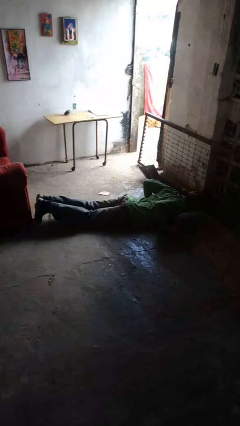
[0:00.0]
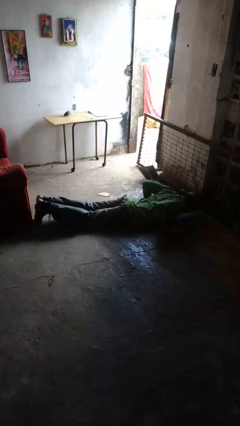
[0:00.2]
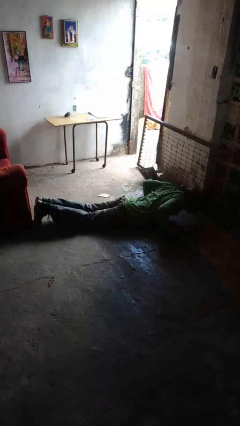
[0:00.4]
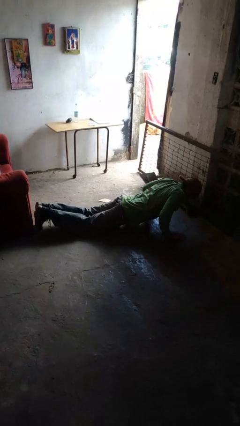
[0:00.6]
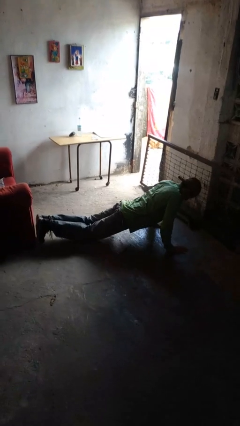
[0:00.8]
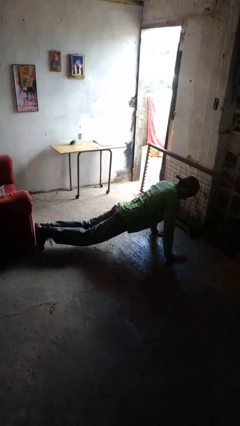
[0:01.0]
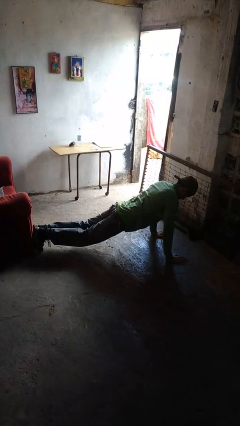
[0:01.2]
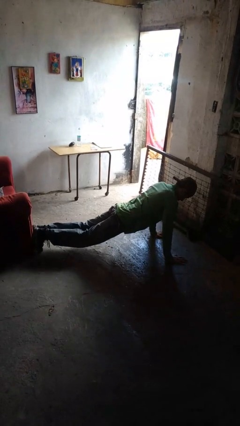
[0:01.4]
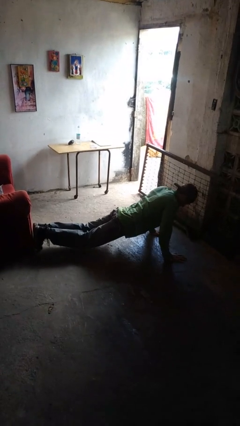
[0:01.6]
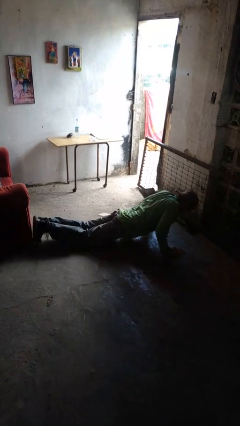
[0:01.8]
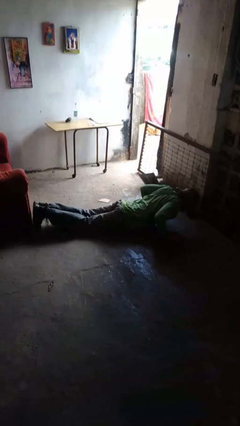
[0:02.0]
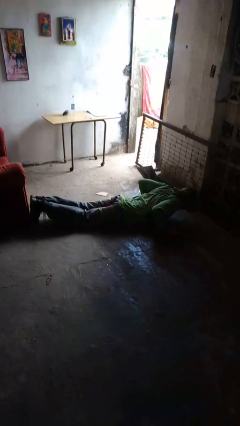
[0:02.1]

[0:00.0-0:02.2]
person exercises with pushup

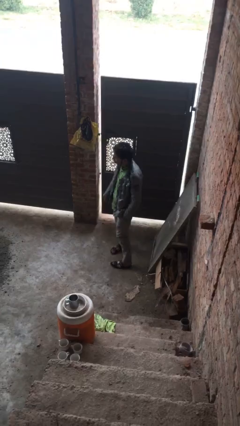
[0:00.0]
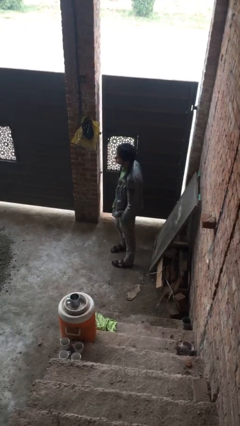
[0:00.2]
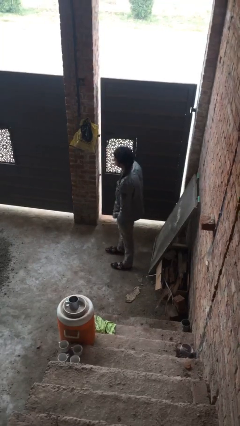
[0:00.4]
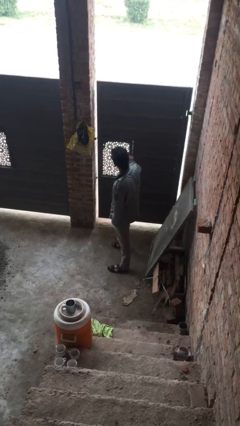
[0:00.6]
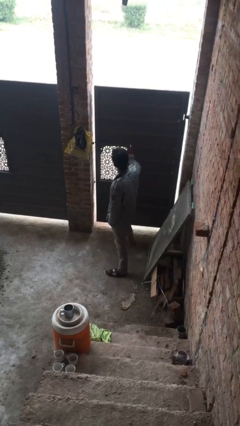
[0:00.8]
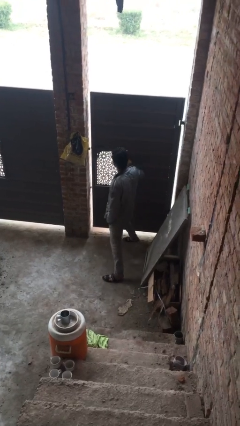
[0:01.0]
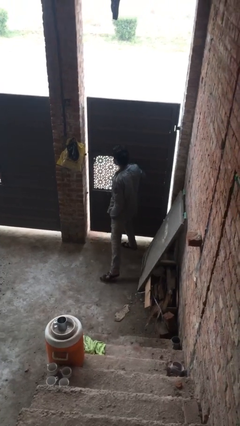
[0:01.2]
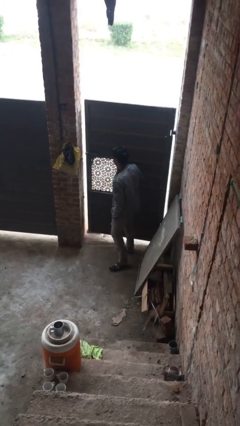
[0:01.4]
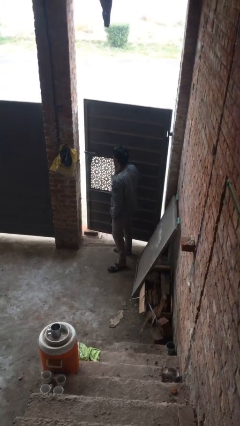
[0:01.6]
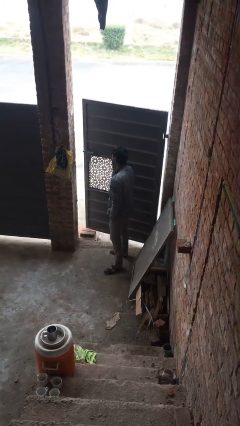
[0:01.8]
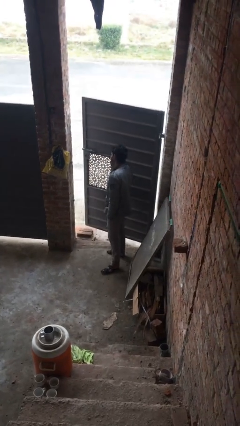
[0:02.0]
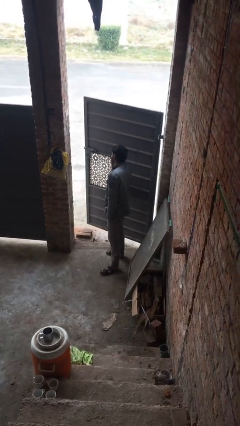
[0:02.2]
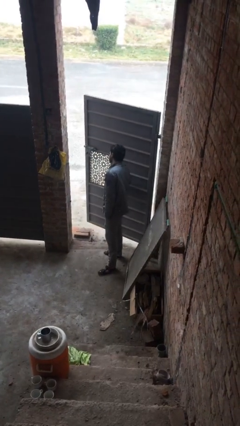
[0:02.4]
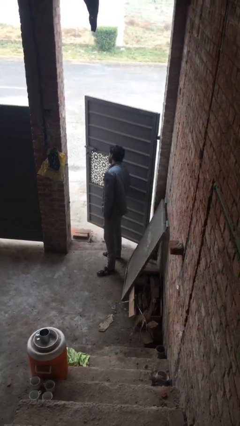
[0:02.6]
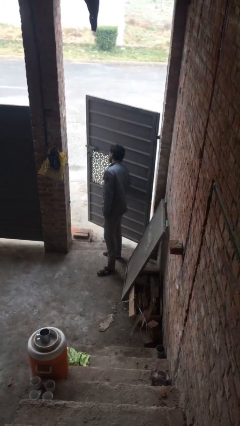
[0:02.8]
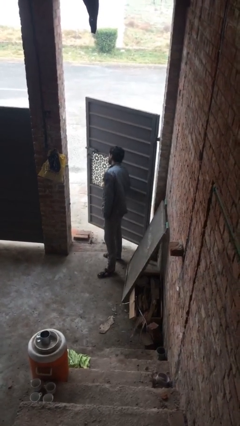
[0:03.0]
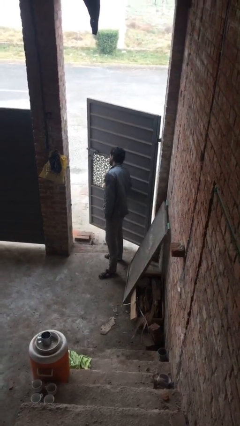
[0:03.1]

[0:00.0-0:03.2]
person opens facility door

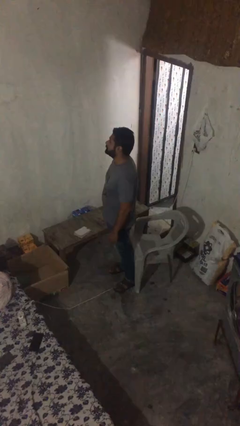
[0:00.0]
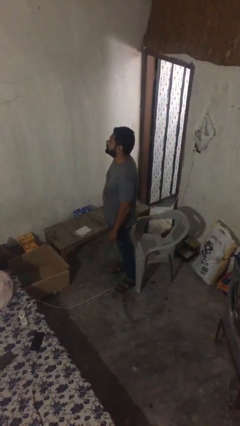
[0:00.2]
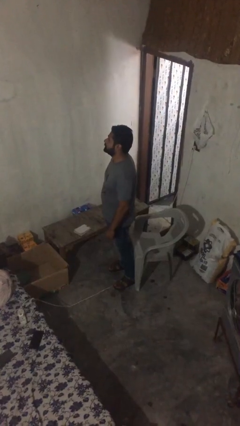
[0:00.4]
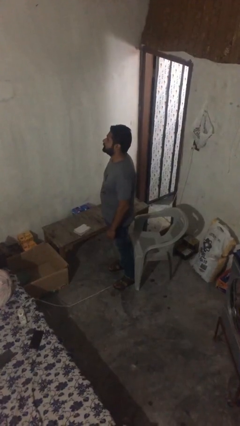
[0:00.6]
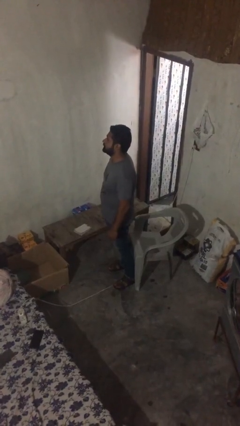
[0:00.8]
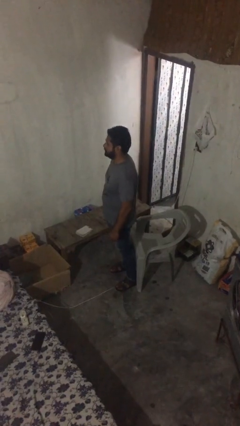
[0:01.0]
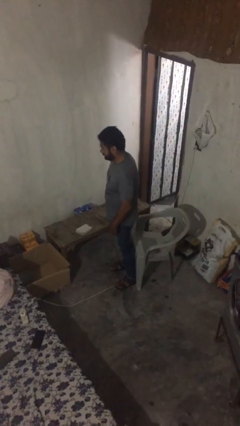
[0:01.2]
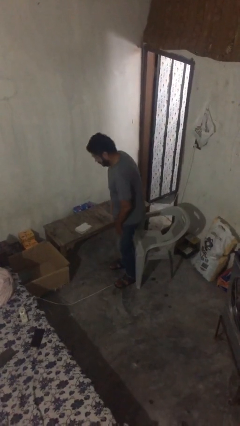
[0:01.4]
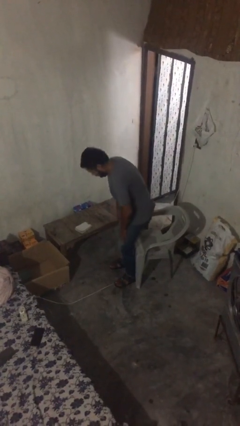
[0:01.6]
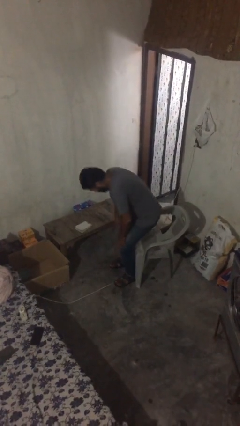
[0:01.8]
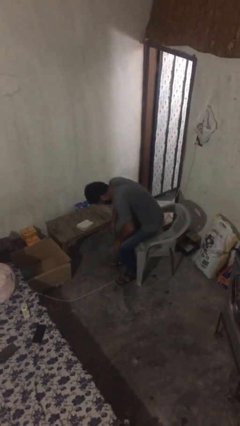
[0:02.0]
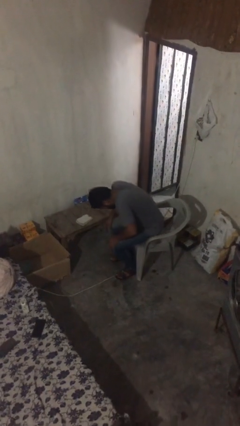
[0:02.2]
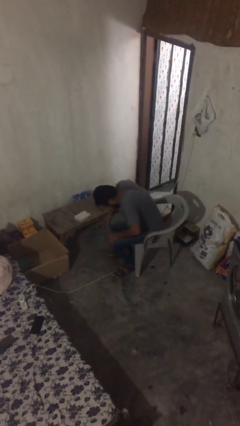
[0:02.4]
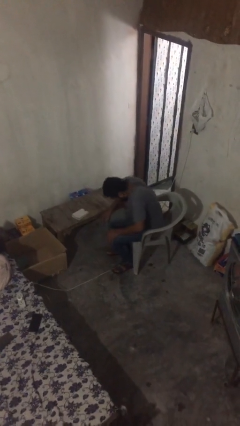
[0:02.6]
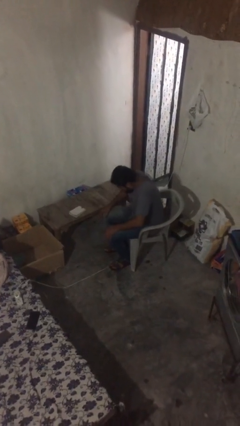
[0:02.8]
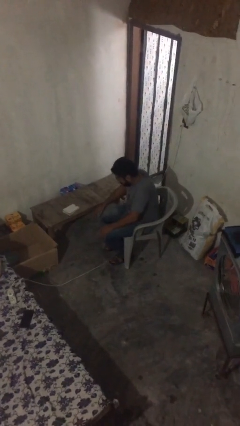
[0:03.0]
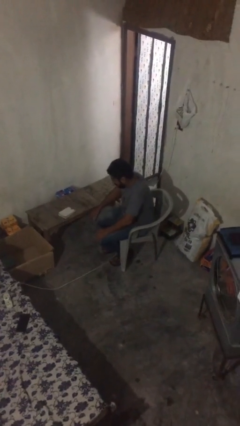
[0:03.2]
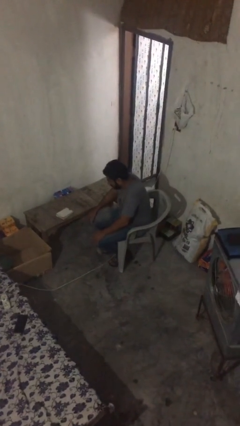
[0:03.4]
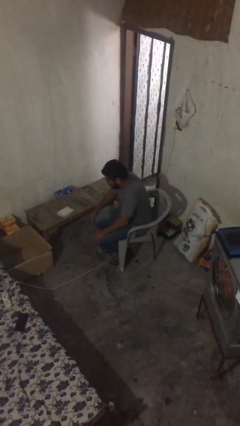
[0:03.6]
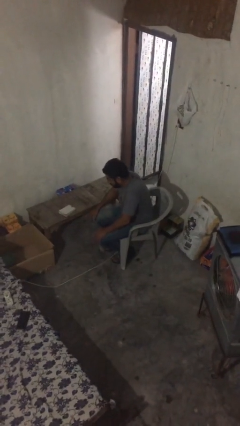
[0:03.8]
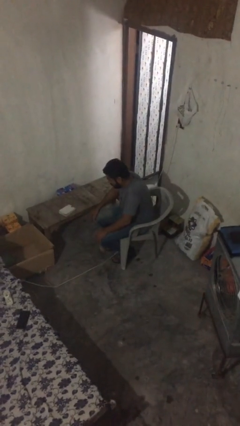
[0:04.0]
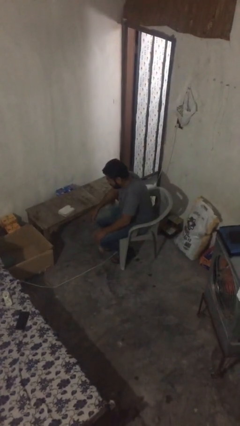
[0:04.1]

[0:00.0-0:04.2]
person sits down

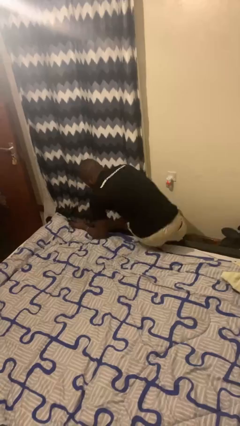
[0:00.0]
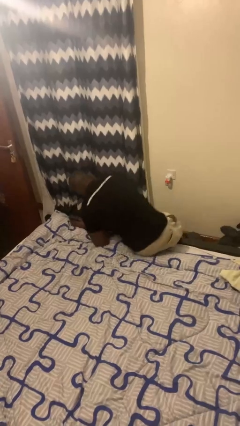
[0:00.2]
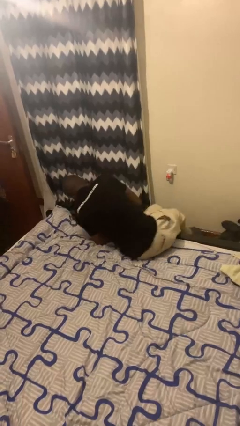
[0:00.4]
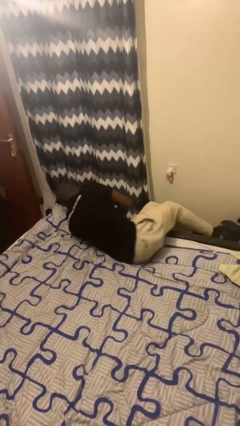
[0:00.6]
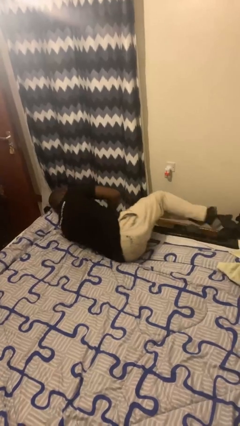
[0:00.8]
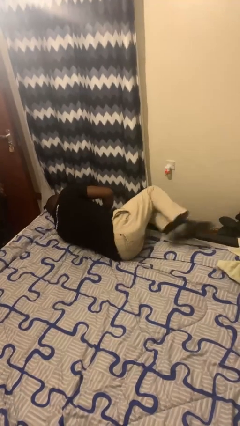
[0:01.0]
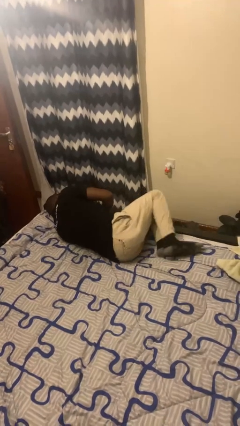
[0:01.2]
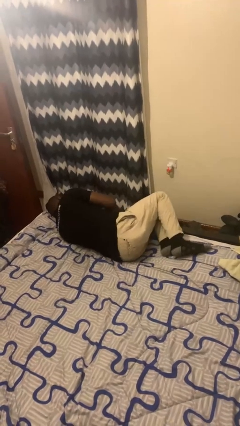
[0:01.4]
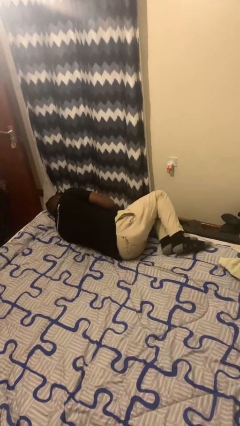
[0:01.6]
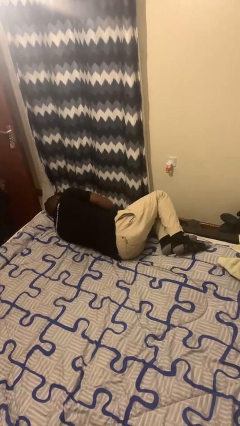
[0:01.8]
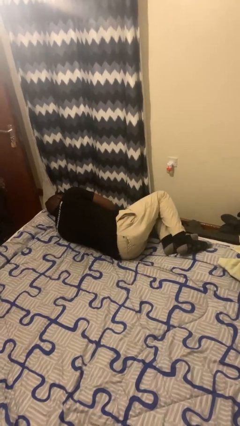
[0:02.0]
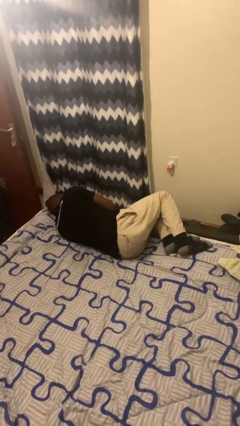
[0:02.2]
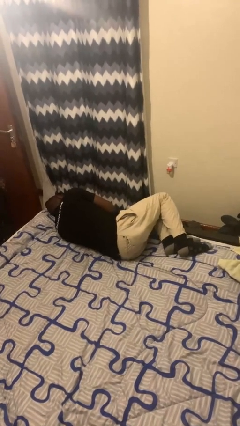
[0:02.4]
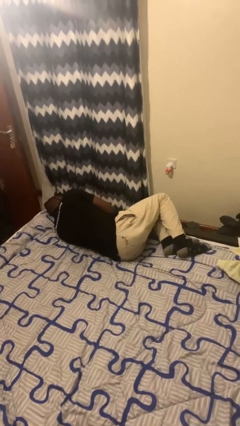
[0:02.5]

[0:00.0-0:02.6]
person lies down on bed

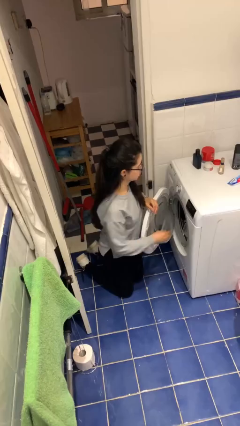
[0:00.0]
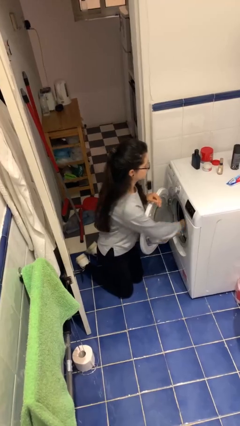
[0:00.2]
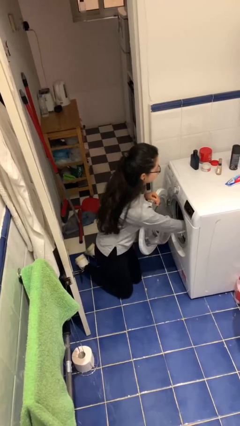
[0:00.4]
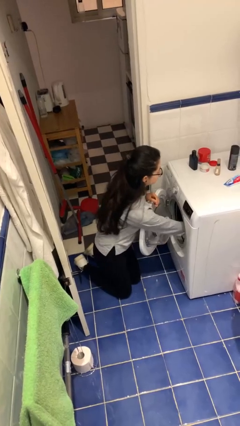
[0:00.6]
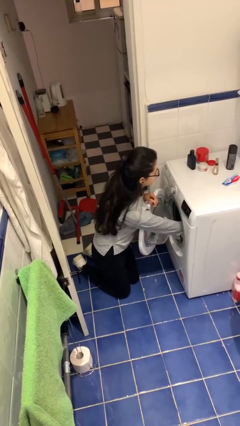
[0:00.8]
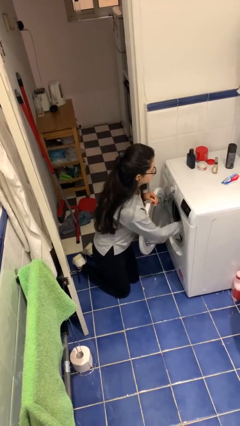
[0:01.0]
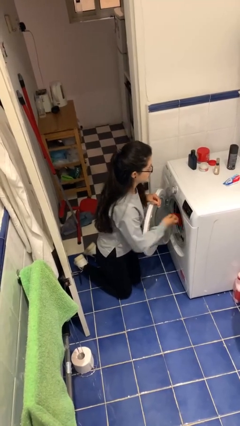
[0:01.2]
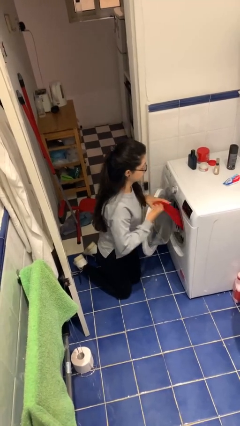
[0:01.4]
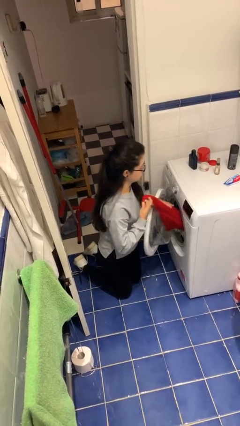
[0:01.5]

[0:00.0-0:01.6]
person unloads dryer

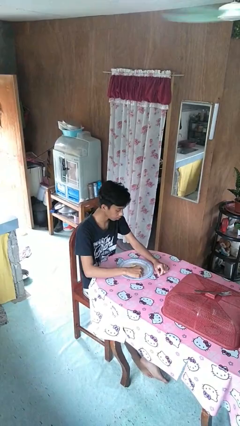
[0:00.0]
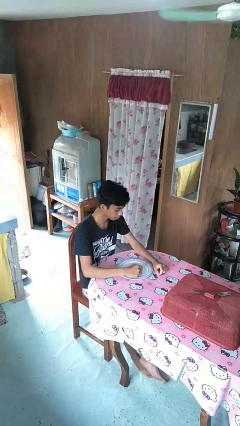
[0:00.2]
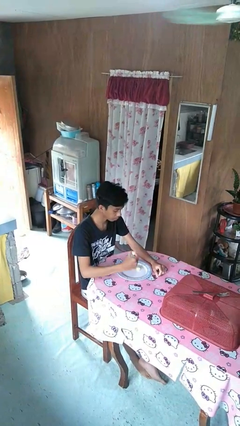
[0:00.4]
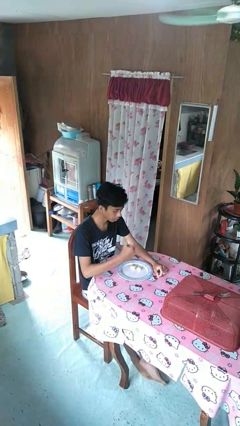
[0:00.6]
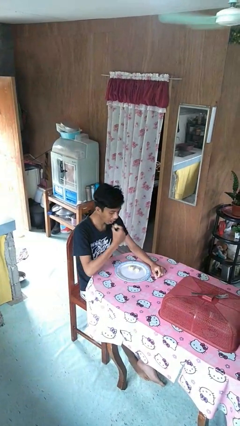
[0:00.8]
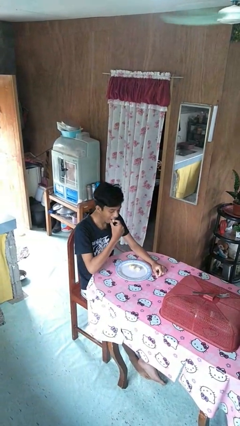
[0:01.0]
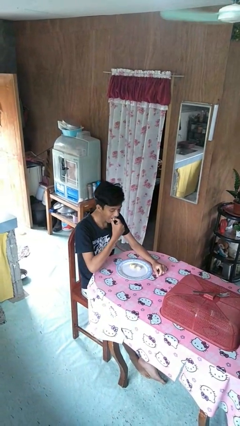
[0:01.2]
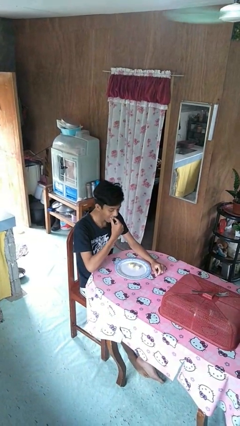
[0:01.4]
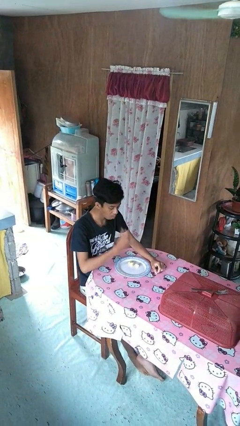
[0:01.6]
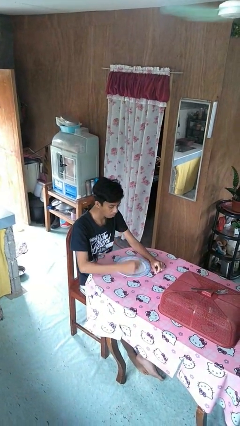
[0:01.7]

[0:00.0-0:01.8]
person eats with hands

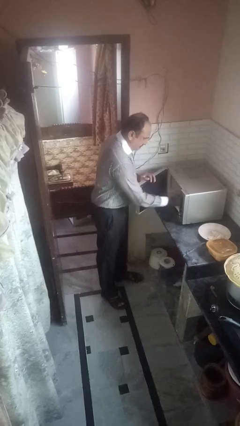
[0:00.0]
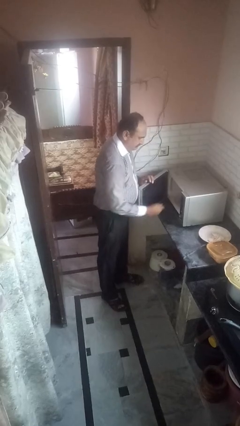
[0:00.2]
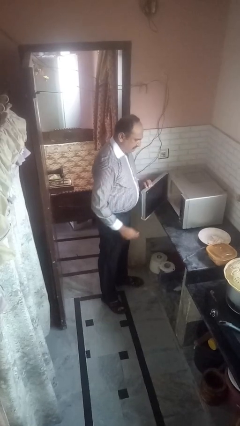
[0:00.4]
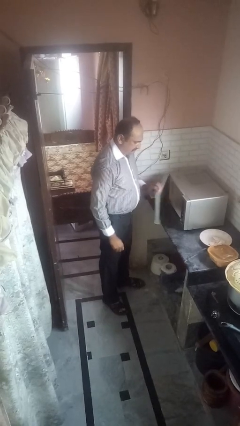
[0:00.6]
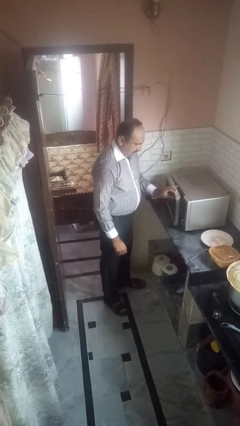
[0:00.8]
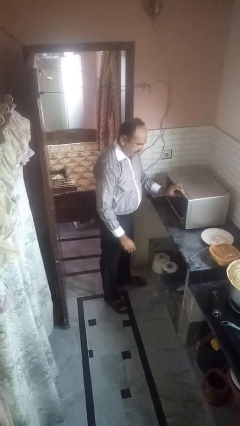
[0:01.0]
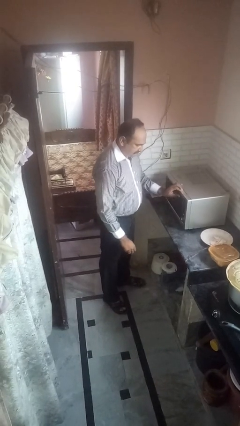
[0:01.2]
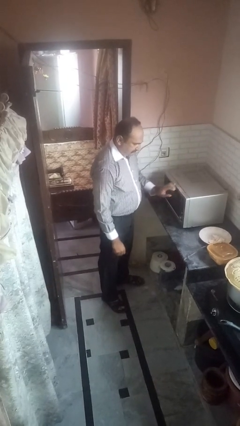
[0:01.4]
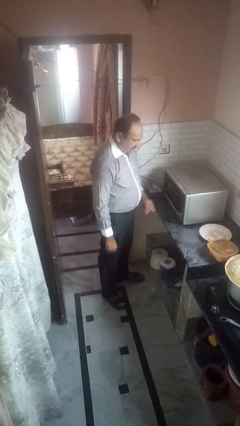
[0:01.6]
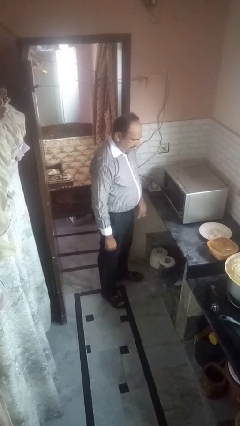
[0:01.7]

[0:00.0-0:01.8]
person closes microwave
